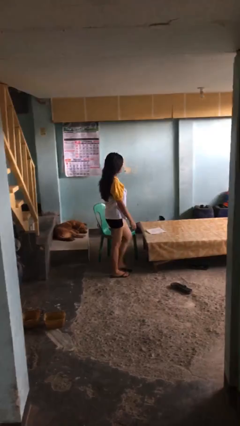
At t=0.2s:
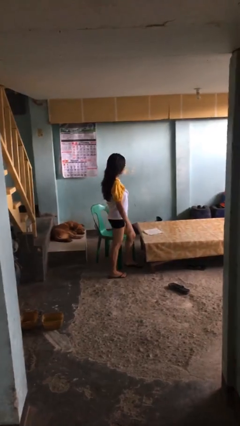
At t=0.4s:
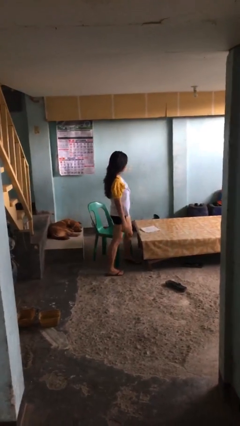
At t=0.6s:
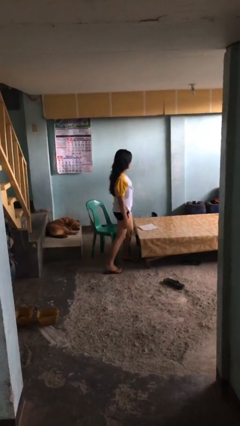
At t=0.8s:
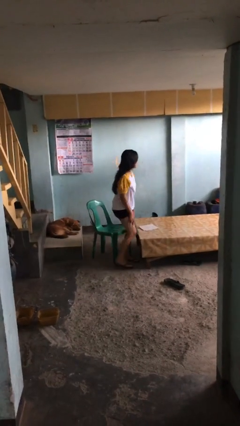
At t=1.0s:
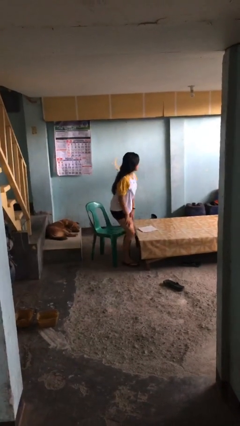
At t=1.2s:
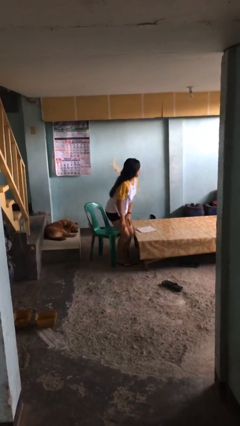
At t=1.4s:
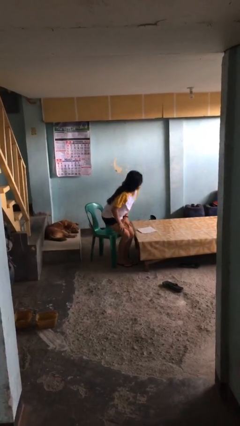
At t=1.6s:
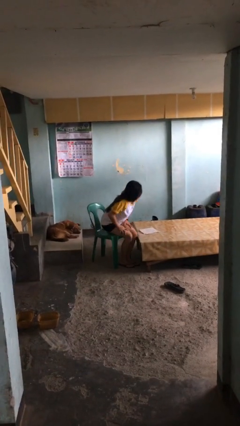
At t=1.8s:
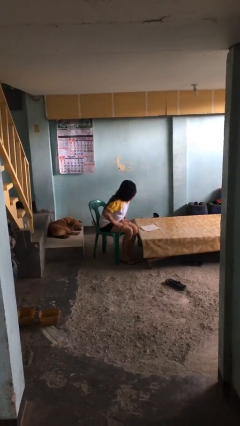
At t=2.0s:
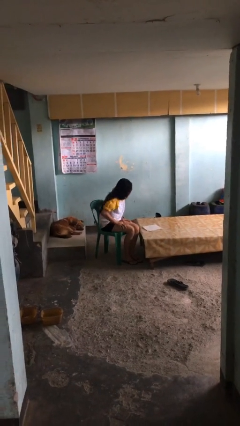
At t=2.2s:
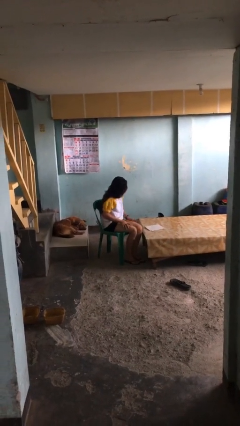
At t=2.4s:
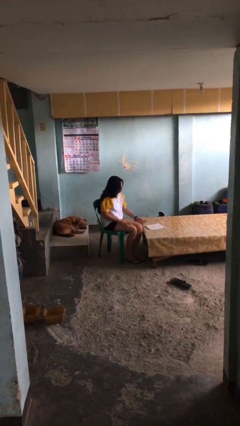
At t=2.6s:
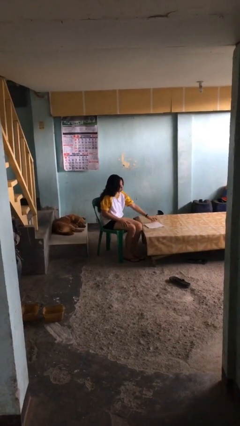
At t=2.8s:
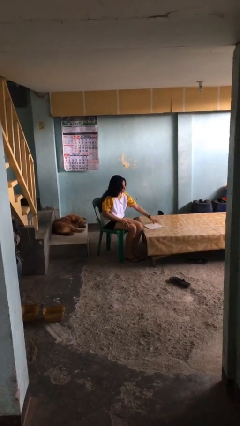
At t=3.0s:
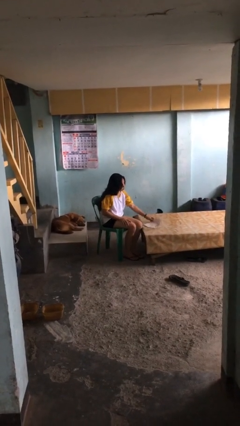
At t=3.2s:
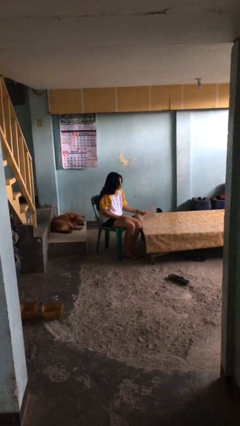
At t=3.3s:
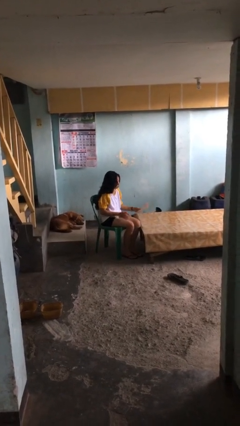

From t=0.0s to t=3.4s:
person sits down

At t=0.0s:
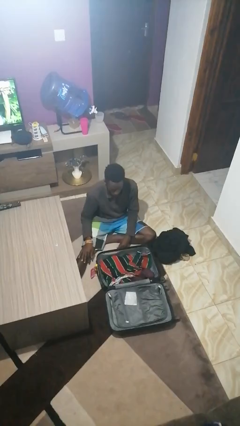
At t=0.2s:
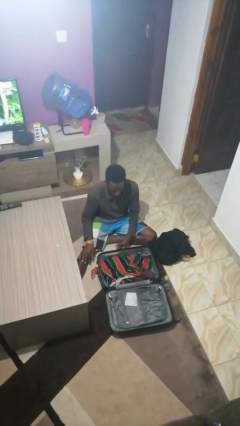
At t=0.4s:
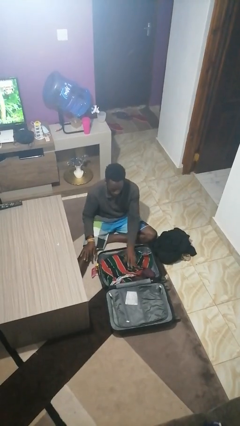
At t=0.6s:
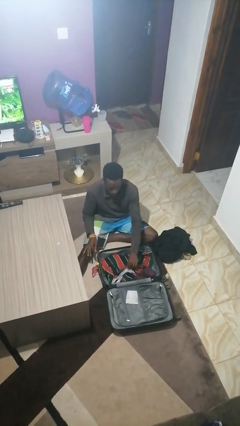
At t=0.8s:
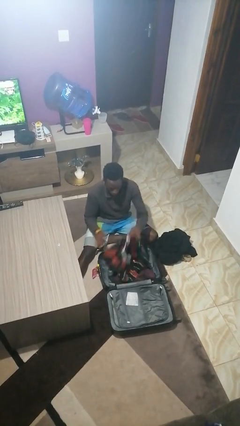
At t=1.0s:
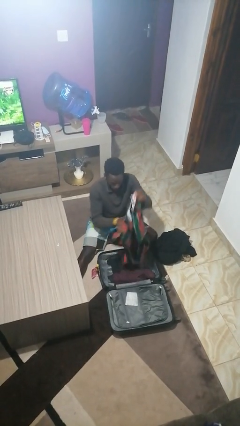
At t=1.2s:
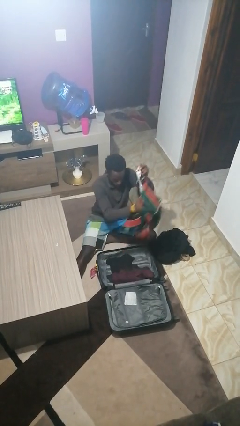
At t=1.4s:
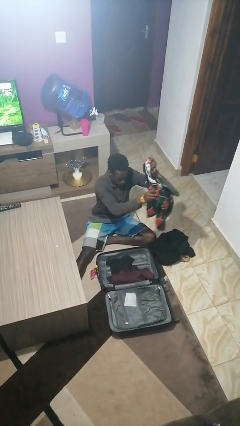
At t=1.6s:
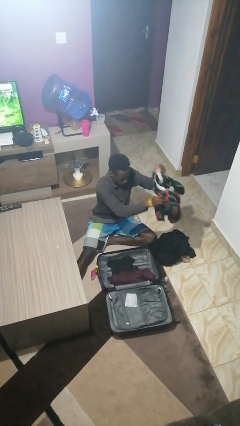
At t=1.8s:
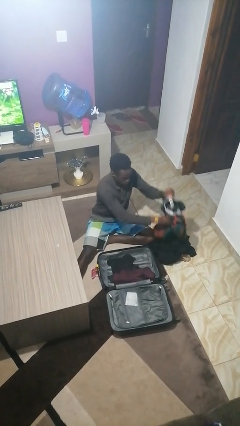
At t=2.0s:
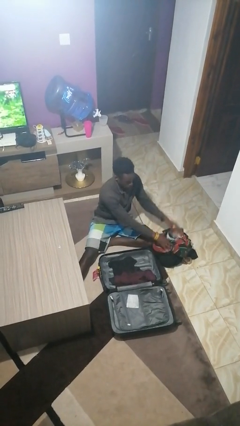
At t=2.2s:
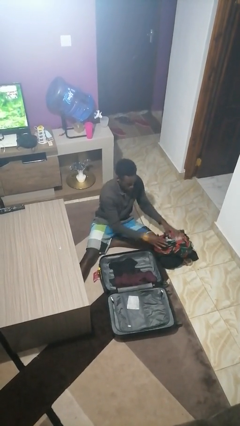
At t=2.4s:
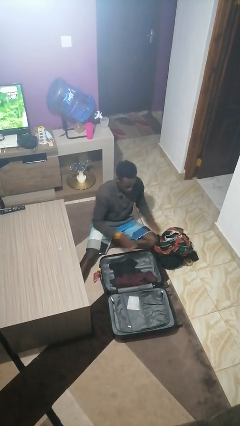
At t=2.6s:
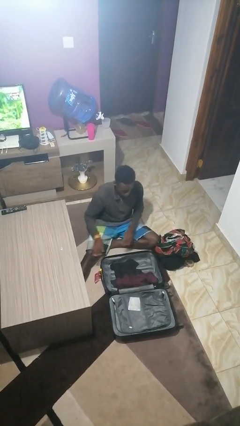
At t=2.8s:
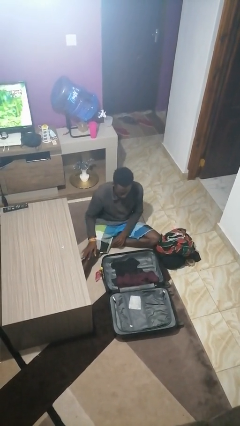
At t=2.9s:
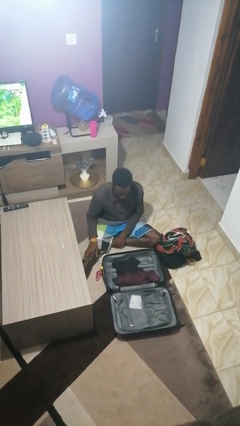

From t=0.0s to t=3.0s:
person unloads clothes from suitcase

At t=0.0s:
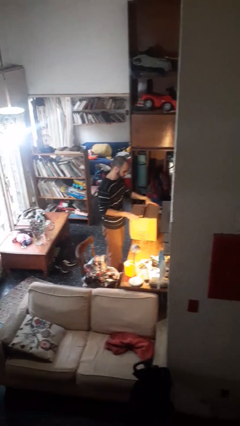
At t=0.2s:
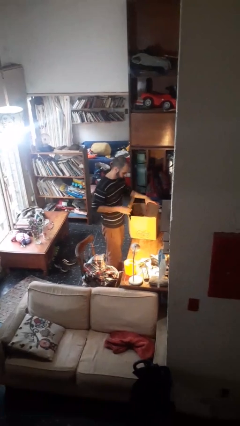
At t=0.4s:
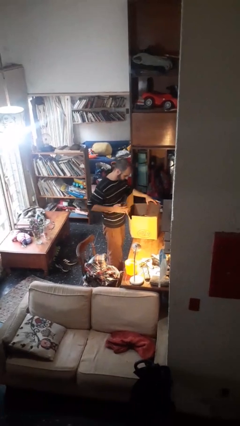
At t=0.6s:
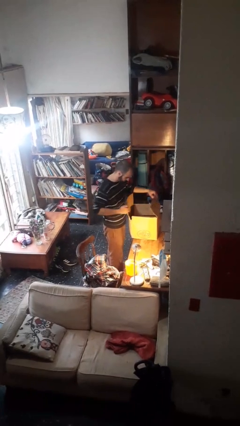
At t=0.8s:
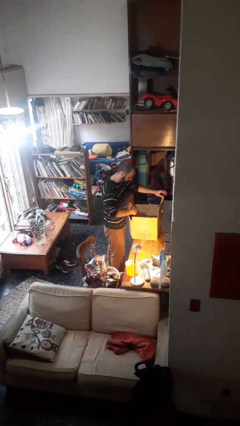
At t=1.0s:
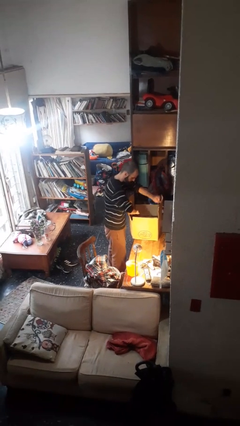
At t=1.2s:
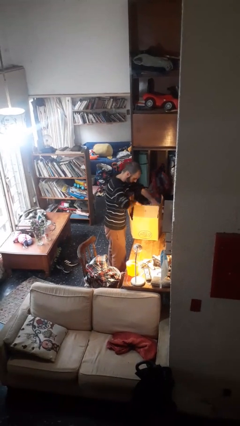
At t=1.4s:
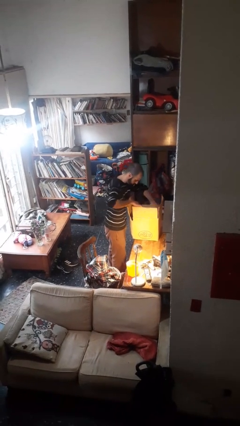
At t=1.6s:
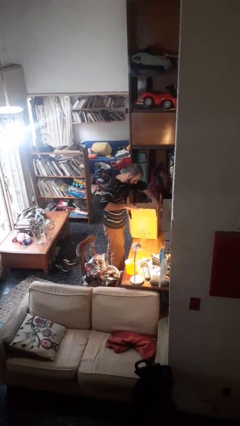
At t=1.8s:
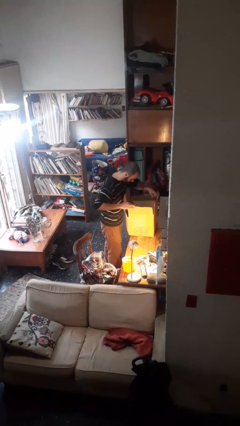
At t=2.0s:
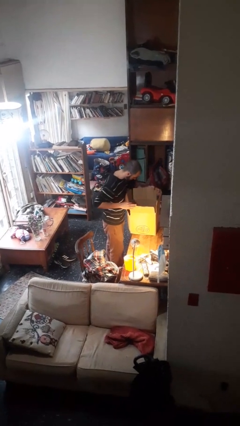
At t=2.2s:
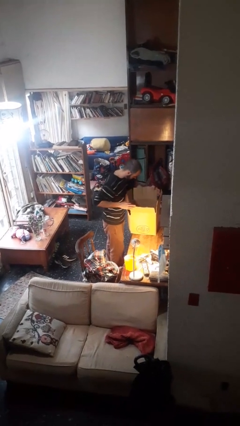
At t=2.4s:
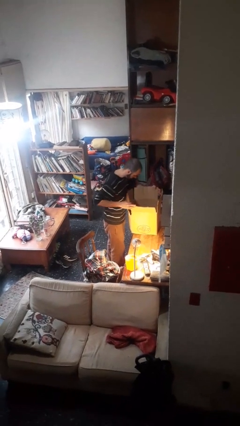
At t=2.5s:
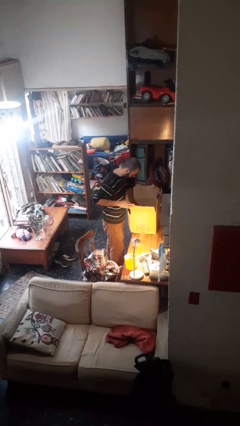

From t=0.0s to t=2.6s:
person opens box

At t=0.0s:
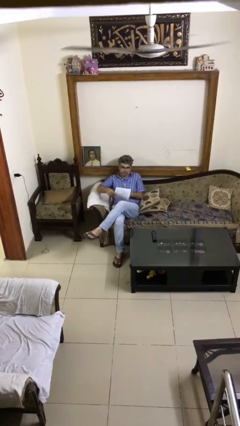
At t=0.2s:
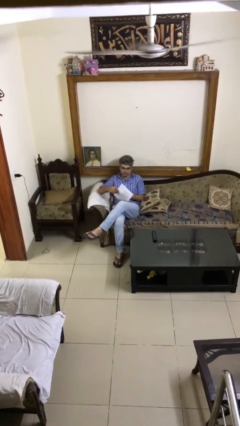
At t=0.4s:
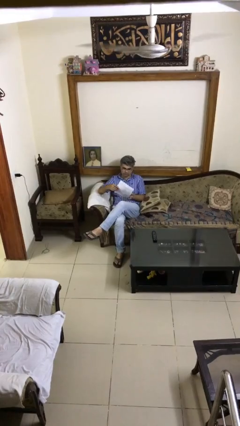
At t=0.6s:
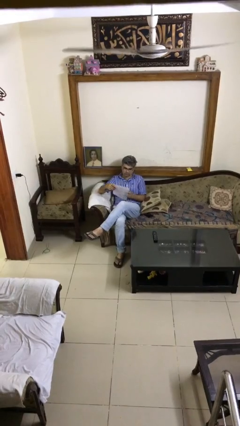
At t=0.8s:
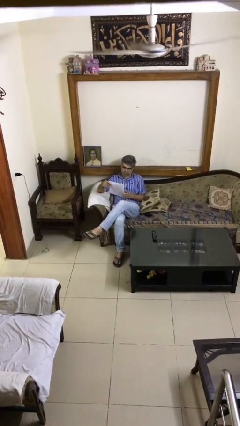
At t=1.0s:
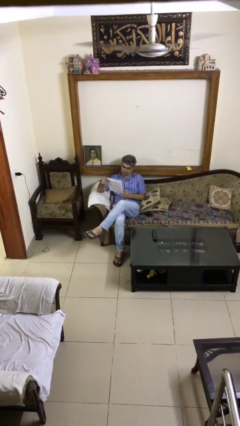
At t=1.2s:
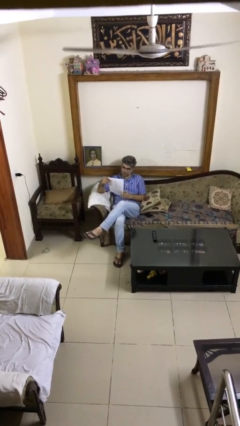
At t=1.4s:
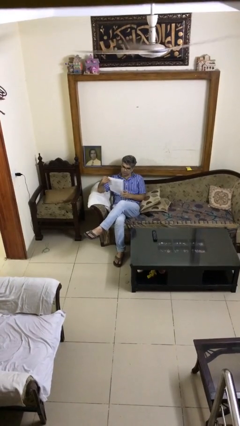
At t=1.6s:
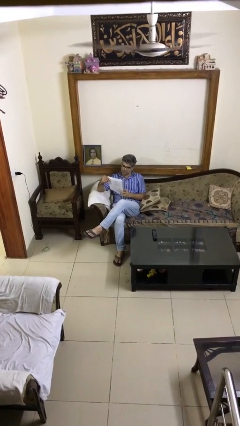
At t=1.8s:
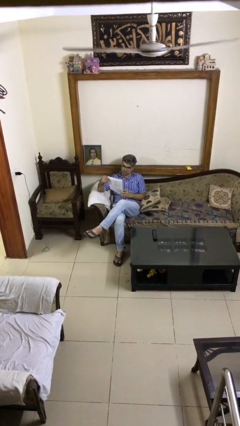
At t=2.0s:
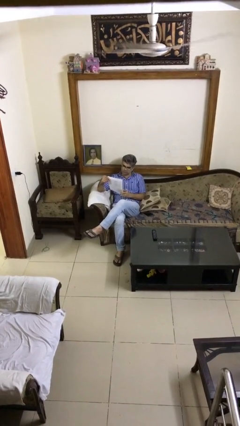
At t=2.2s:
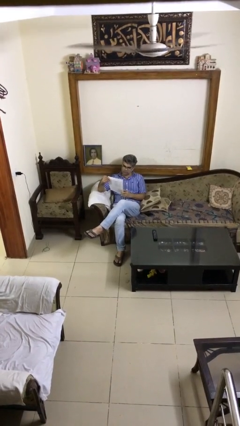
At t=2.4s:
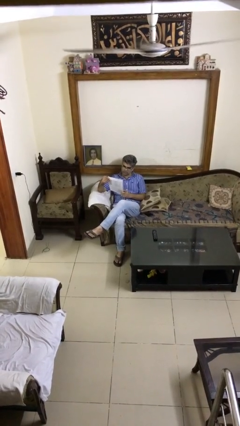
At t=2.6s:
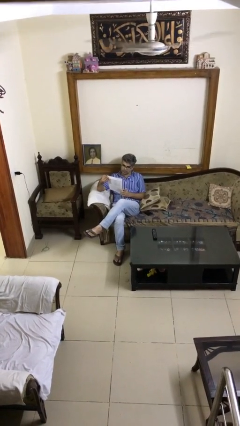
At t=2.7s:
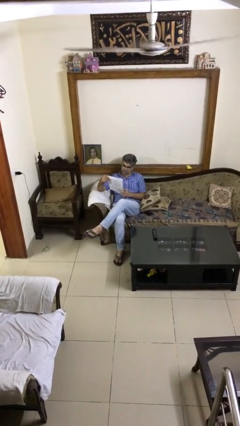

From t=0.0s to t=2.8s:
person reads document

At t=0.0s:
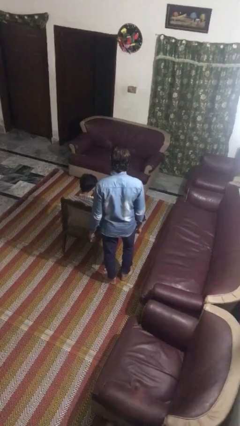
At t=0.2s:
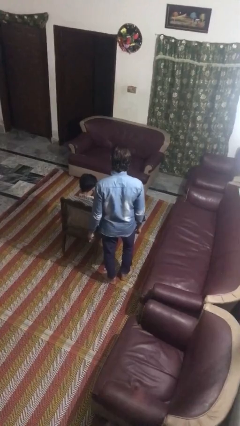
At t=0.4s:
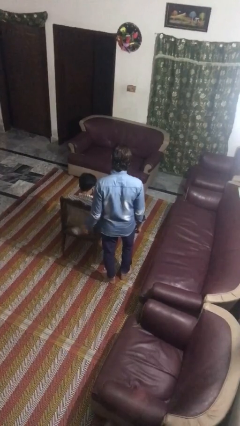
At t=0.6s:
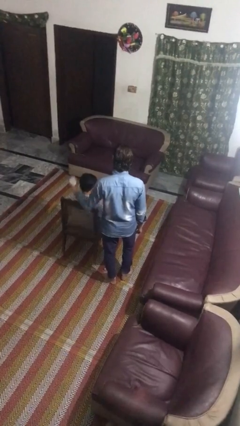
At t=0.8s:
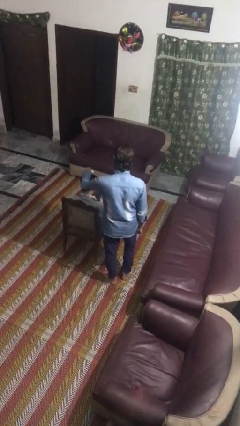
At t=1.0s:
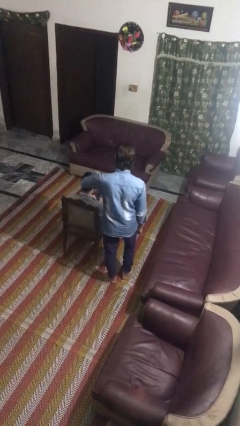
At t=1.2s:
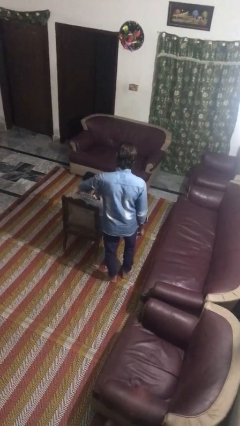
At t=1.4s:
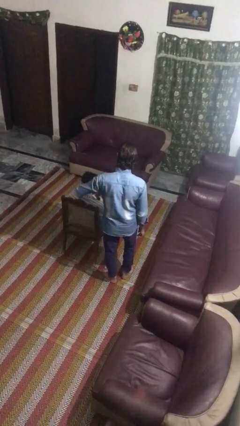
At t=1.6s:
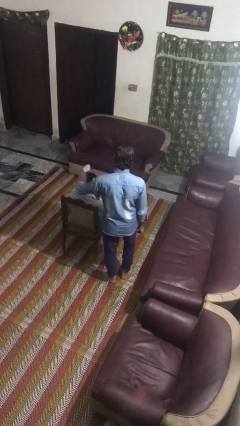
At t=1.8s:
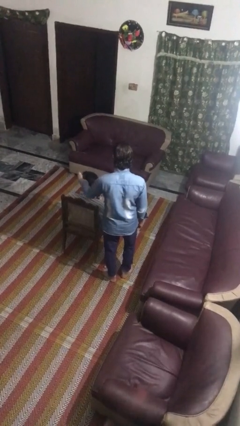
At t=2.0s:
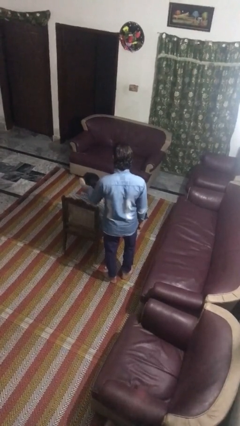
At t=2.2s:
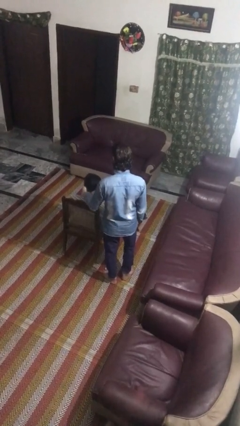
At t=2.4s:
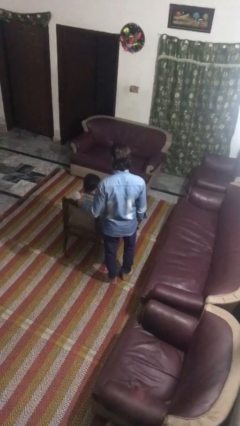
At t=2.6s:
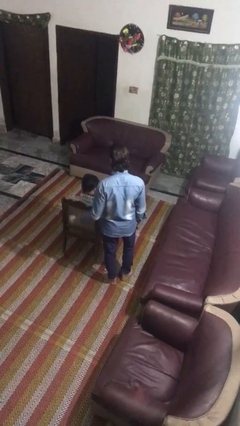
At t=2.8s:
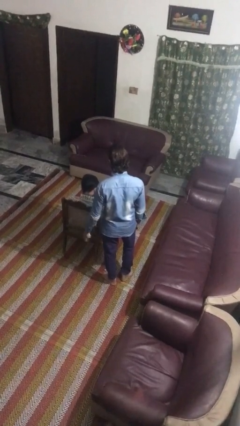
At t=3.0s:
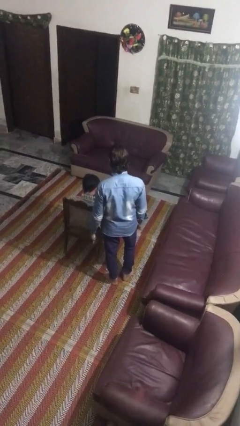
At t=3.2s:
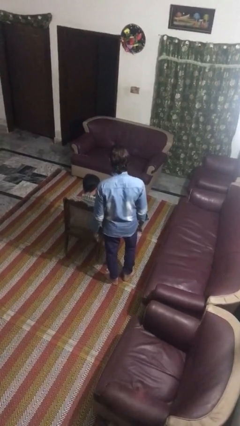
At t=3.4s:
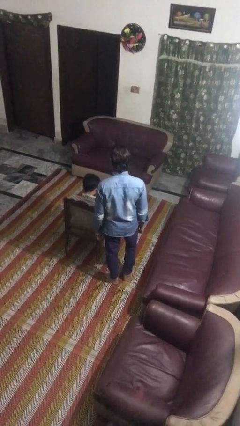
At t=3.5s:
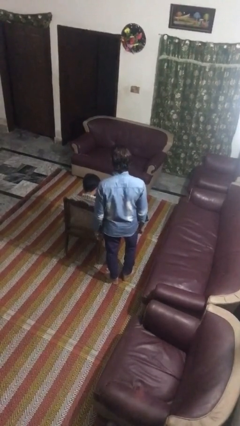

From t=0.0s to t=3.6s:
person brushes hair of person

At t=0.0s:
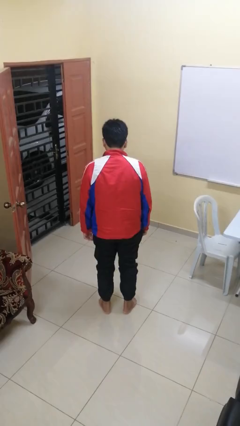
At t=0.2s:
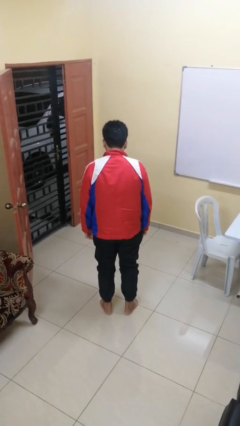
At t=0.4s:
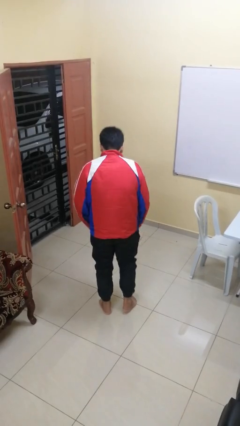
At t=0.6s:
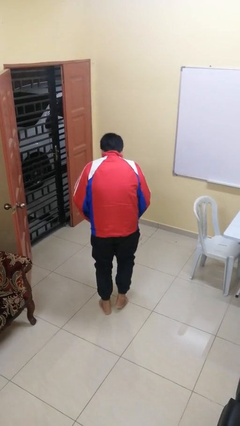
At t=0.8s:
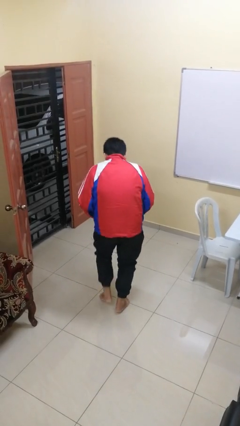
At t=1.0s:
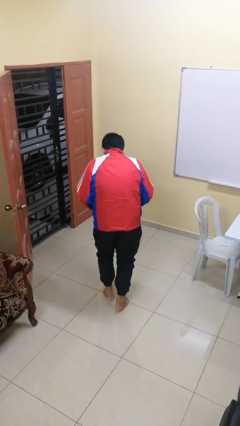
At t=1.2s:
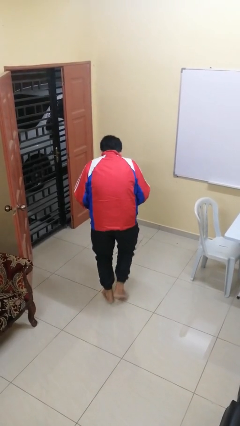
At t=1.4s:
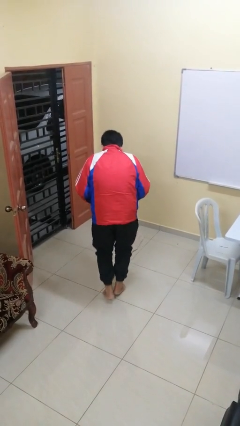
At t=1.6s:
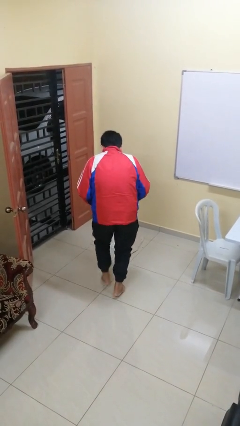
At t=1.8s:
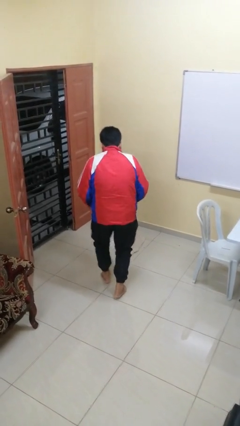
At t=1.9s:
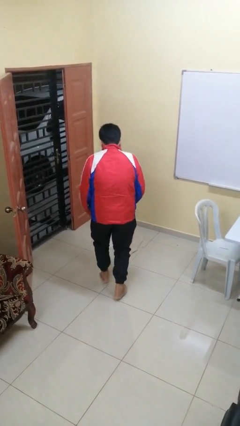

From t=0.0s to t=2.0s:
person walks tiptoe

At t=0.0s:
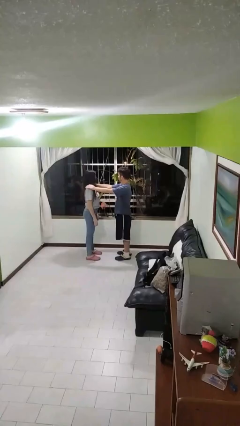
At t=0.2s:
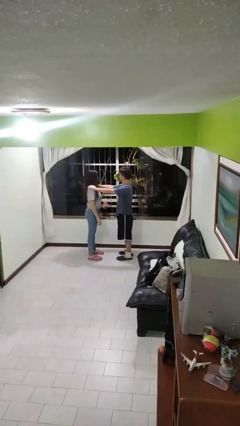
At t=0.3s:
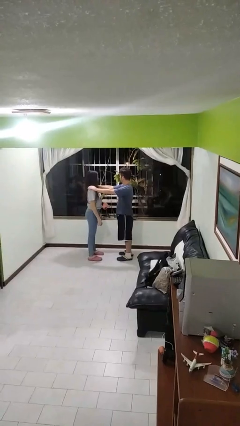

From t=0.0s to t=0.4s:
person grabs person by shoulder
